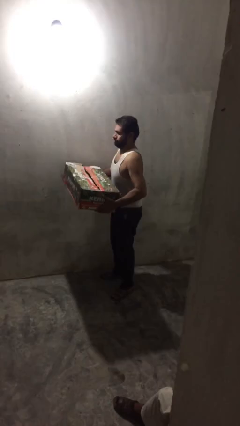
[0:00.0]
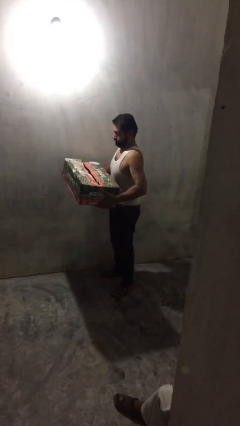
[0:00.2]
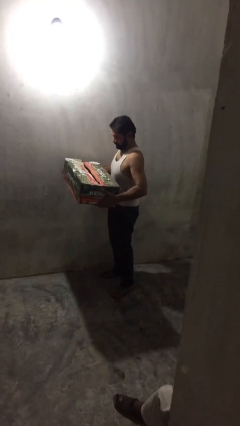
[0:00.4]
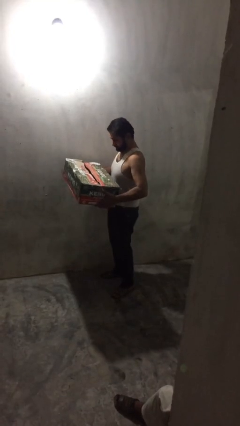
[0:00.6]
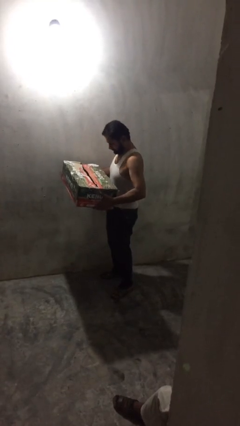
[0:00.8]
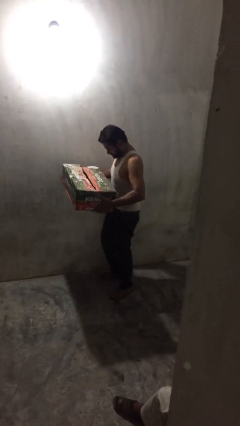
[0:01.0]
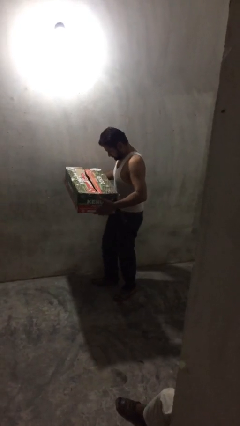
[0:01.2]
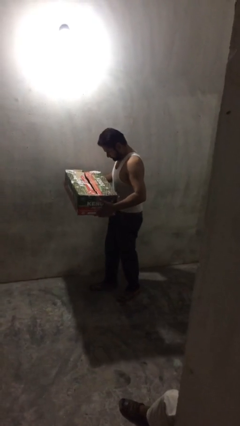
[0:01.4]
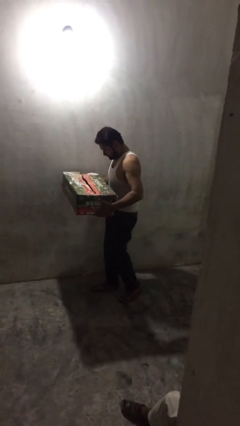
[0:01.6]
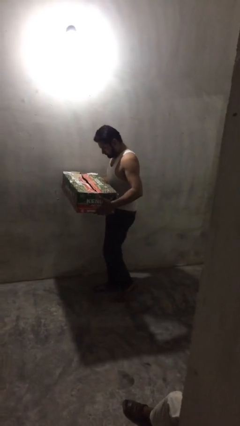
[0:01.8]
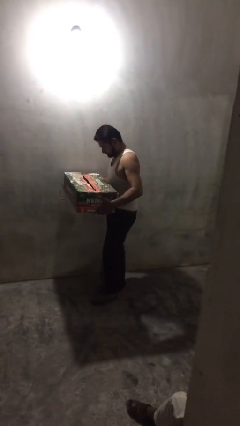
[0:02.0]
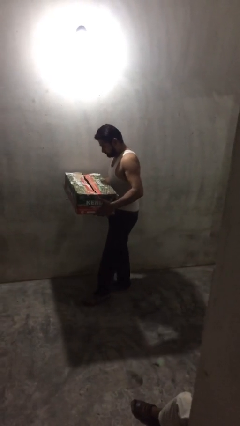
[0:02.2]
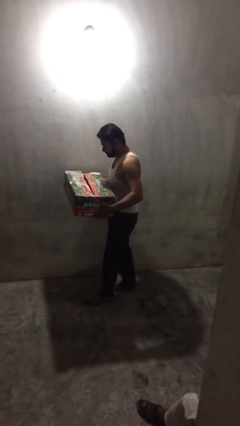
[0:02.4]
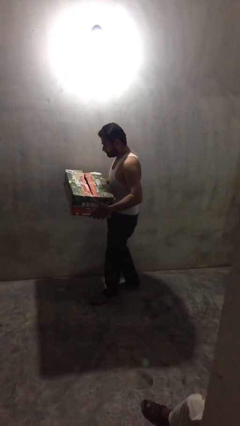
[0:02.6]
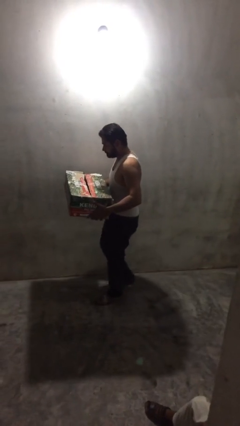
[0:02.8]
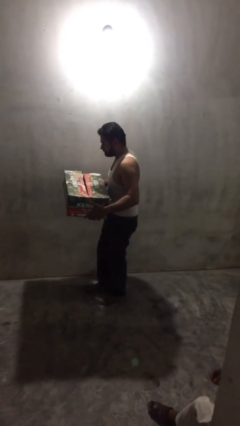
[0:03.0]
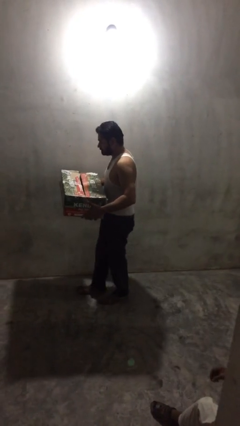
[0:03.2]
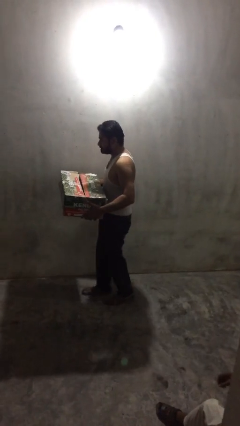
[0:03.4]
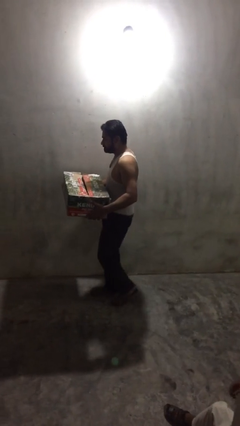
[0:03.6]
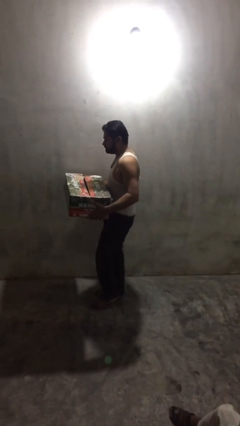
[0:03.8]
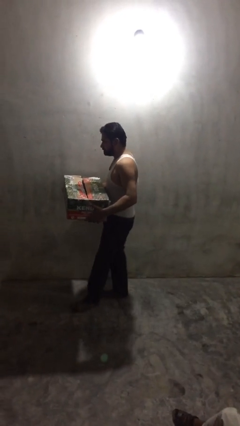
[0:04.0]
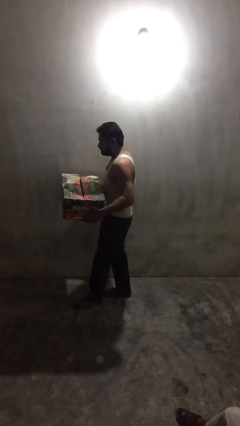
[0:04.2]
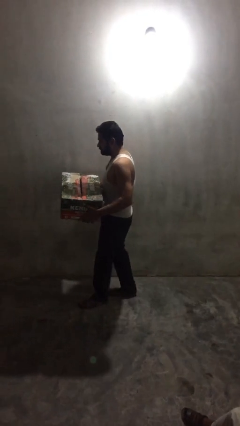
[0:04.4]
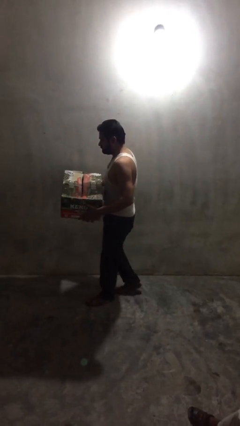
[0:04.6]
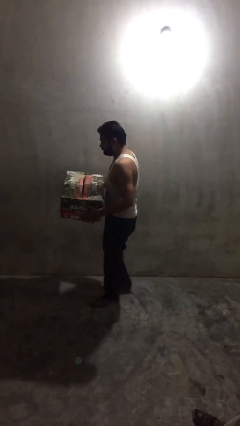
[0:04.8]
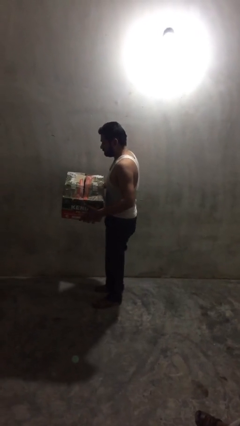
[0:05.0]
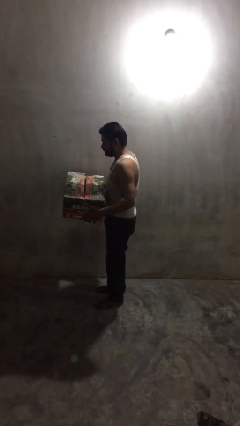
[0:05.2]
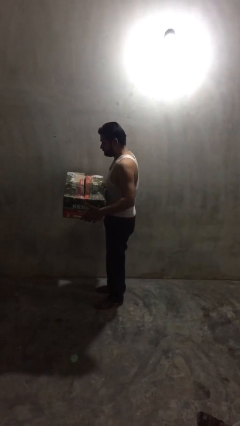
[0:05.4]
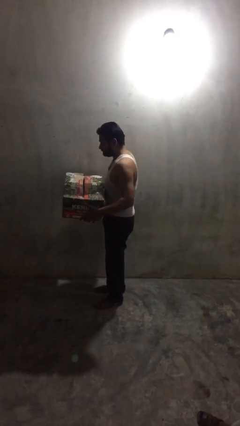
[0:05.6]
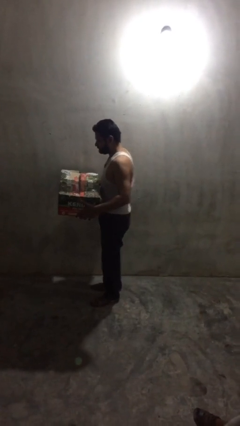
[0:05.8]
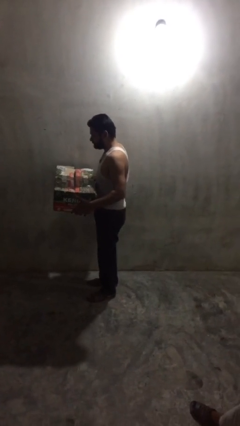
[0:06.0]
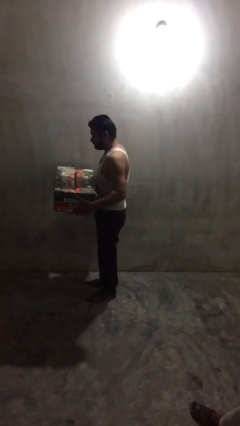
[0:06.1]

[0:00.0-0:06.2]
person carries heavy object

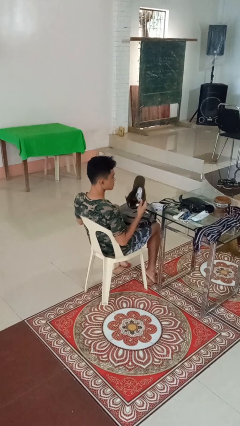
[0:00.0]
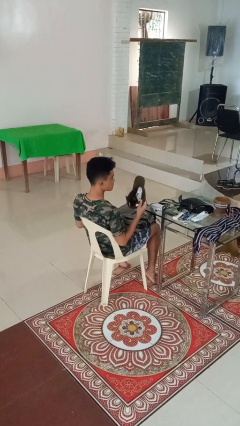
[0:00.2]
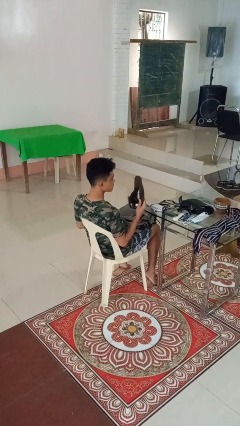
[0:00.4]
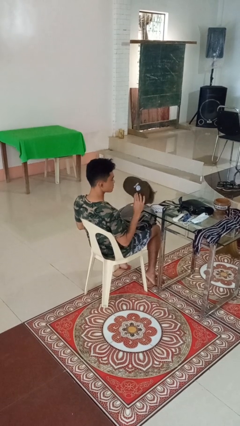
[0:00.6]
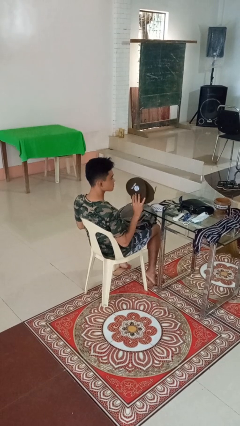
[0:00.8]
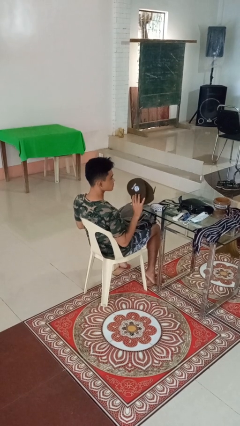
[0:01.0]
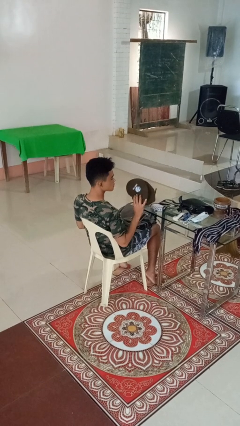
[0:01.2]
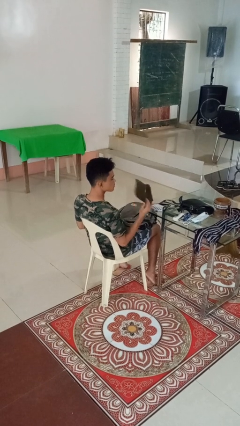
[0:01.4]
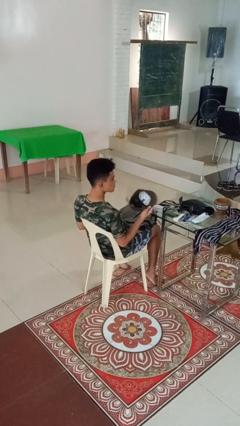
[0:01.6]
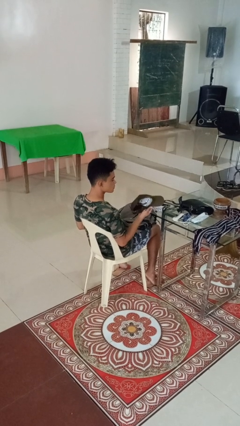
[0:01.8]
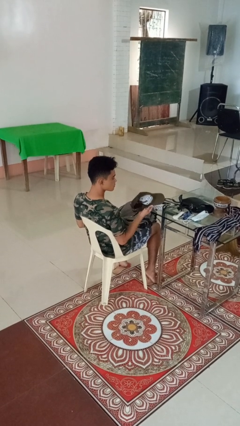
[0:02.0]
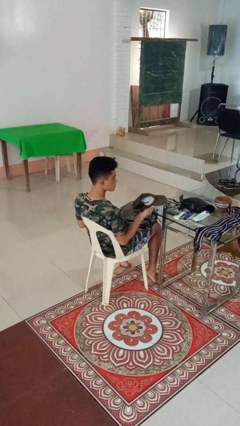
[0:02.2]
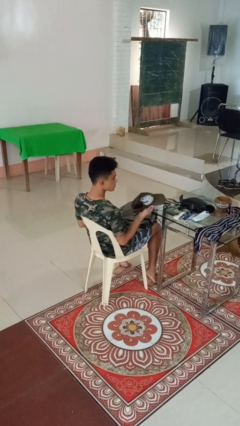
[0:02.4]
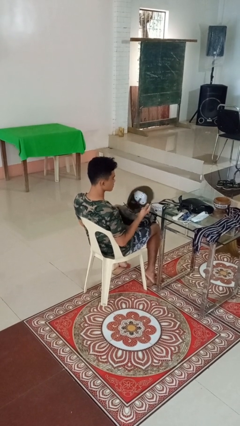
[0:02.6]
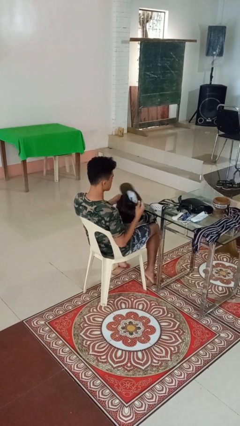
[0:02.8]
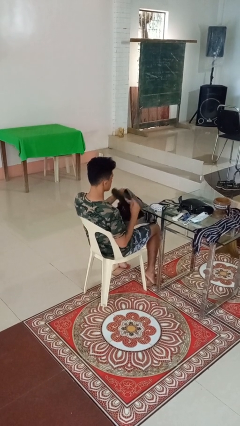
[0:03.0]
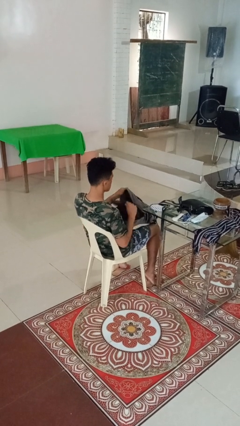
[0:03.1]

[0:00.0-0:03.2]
person takes object from backpack

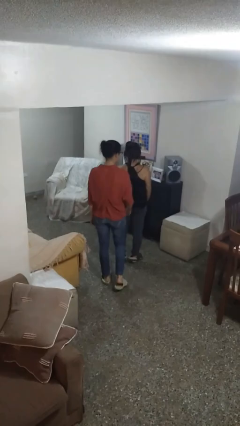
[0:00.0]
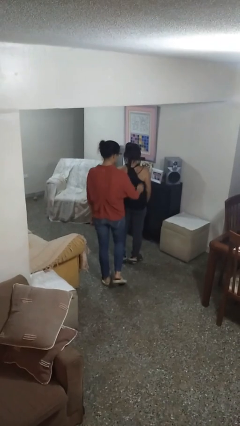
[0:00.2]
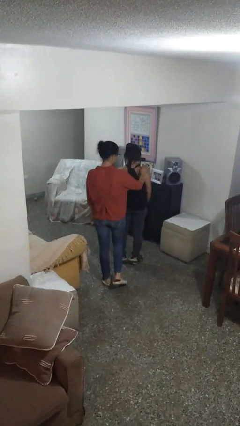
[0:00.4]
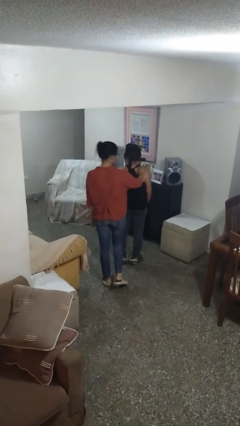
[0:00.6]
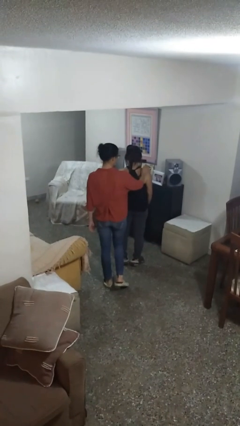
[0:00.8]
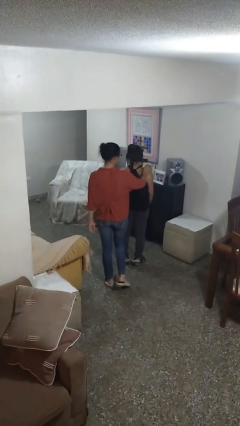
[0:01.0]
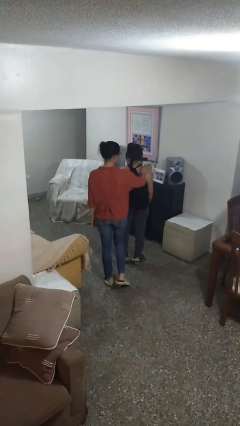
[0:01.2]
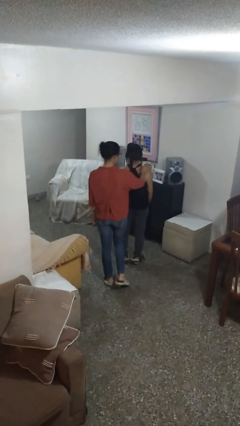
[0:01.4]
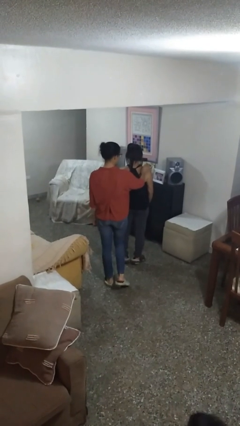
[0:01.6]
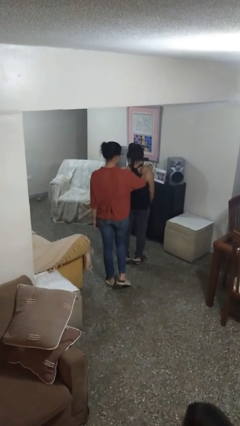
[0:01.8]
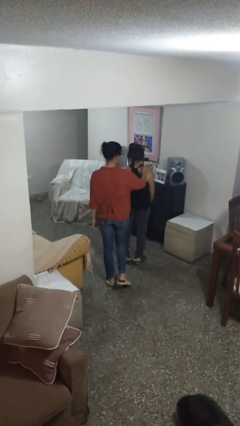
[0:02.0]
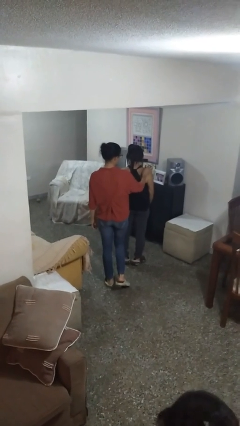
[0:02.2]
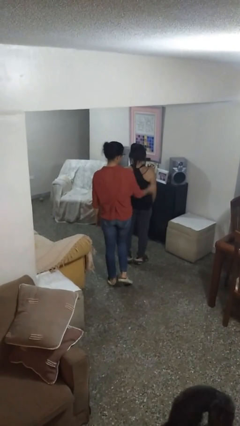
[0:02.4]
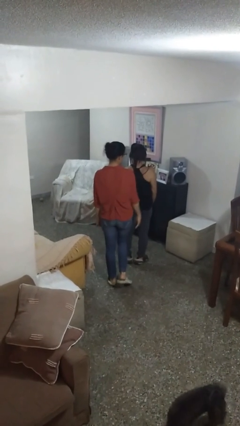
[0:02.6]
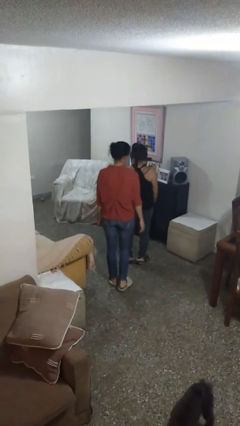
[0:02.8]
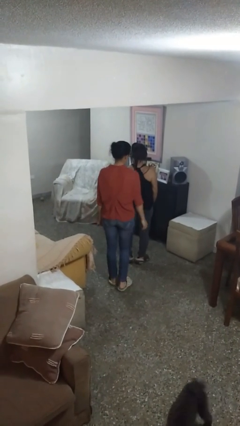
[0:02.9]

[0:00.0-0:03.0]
person touches back of person

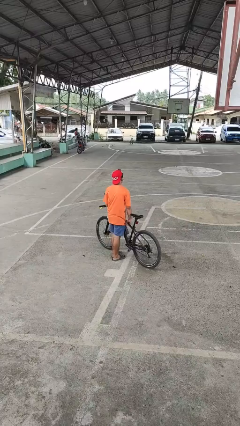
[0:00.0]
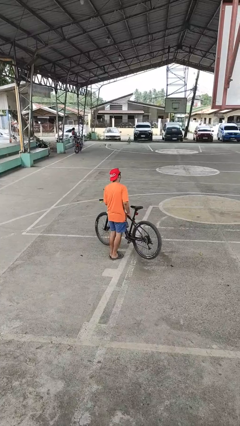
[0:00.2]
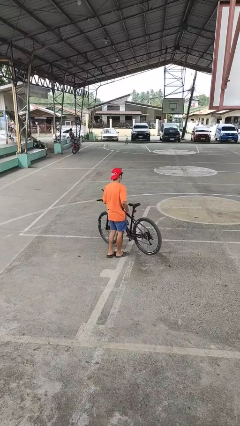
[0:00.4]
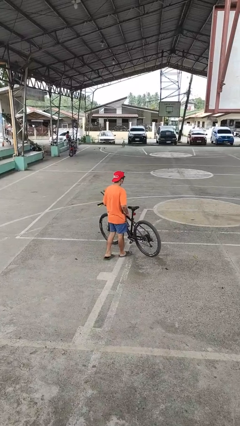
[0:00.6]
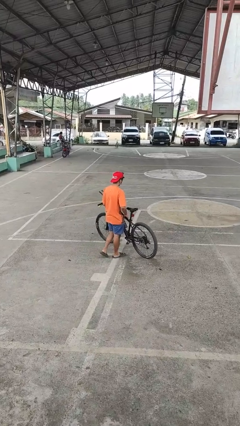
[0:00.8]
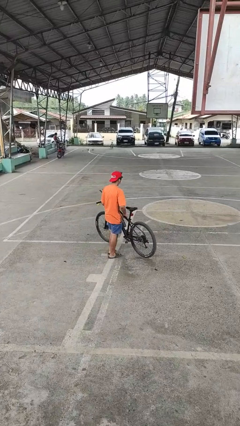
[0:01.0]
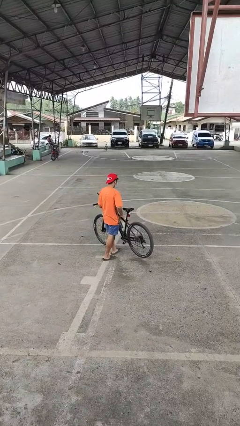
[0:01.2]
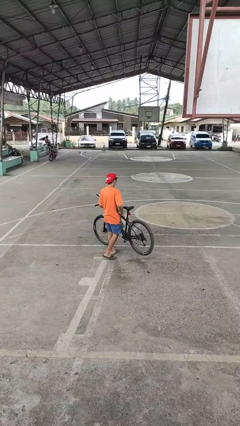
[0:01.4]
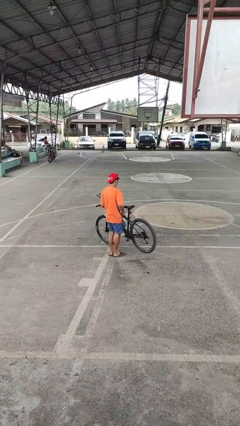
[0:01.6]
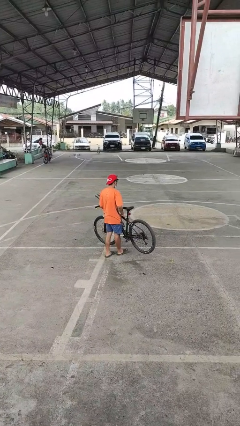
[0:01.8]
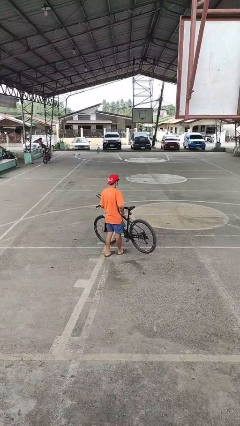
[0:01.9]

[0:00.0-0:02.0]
person carries bicycle

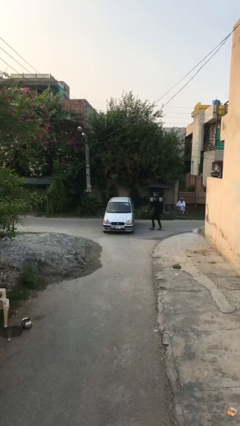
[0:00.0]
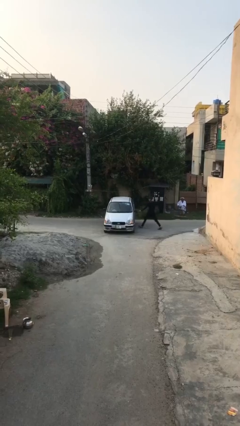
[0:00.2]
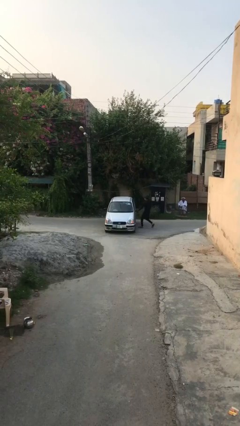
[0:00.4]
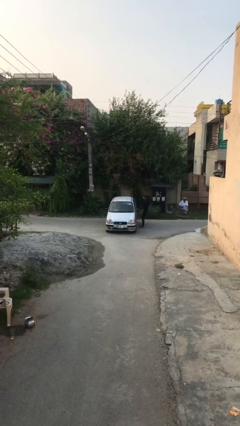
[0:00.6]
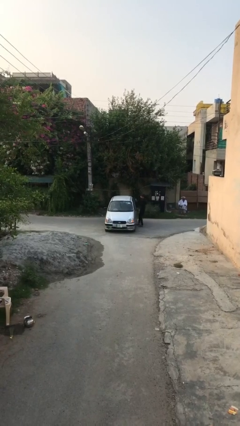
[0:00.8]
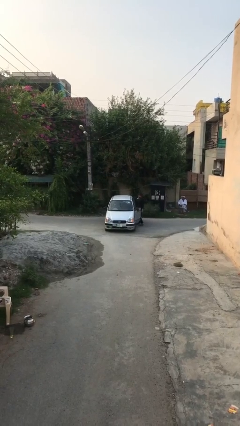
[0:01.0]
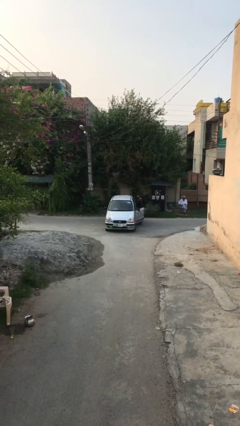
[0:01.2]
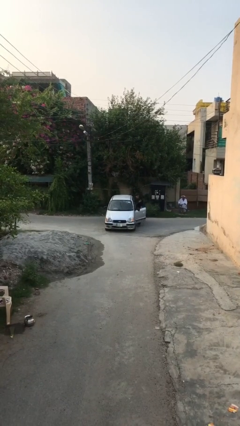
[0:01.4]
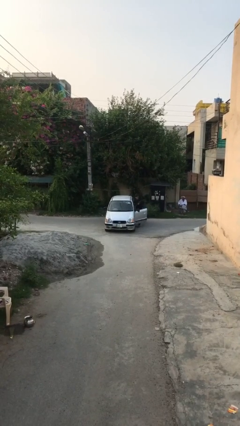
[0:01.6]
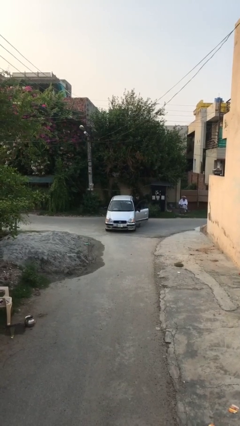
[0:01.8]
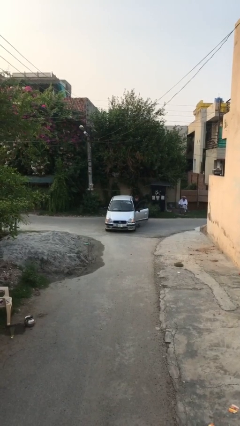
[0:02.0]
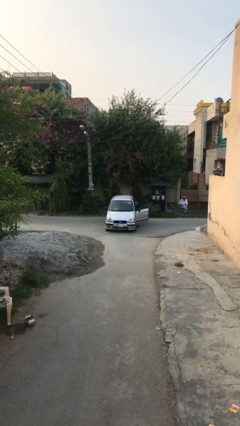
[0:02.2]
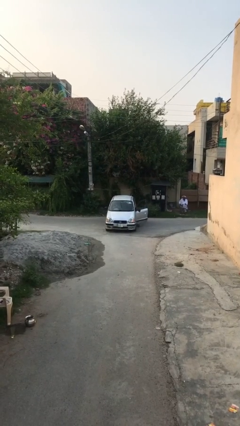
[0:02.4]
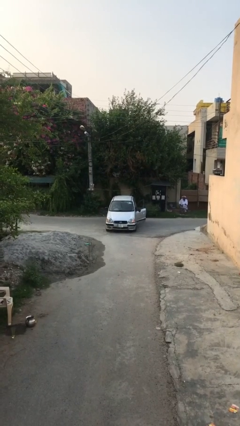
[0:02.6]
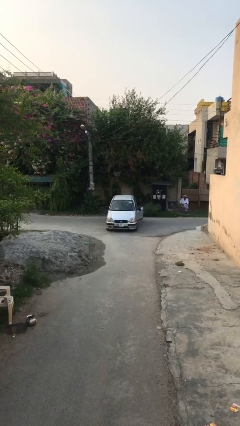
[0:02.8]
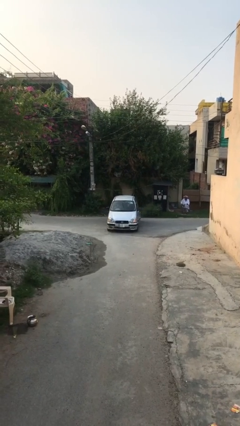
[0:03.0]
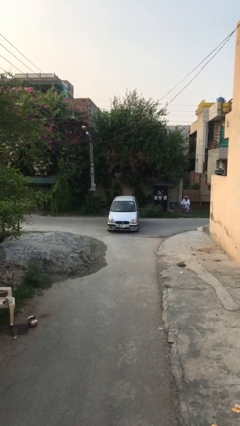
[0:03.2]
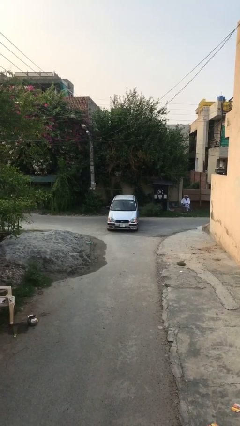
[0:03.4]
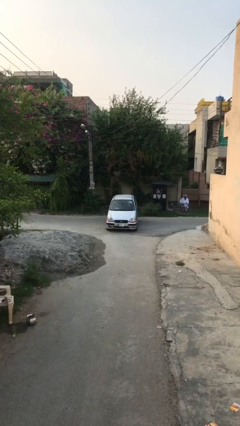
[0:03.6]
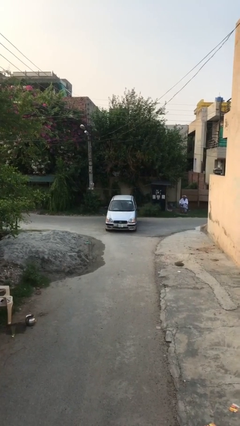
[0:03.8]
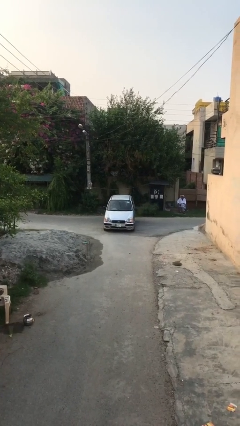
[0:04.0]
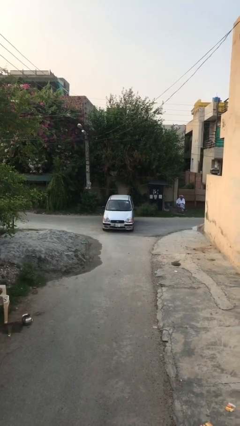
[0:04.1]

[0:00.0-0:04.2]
car picks up person
